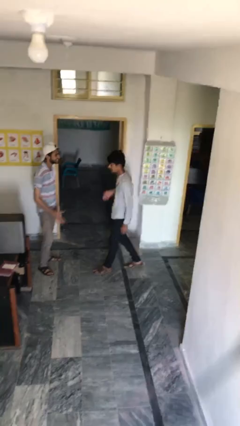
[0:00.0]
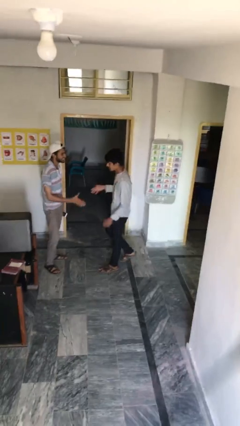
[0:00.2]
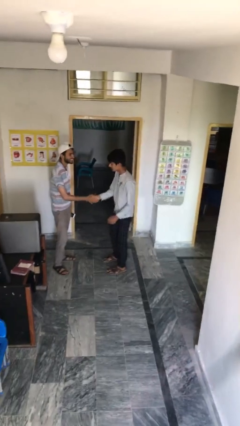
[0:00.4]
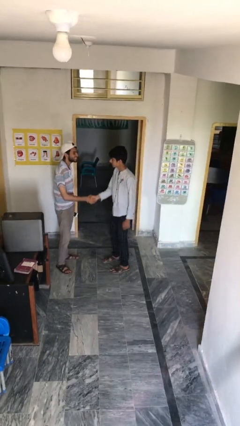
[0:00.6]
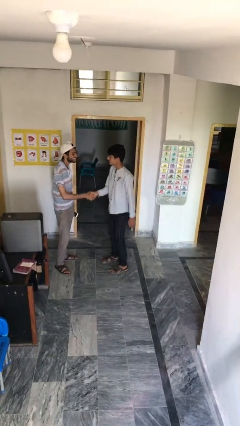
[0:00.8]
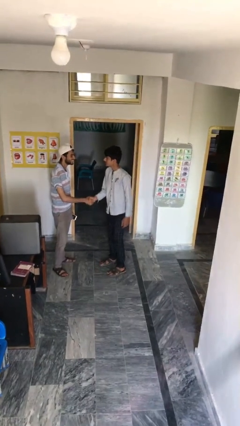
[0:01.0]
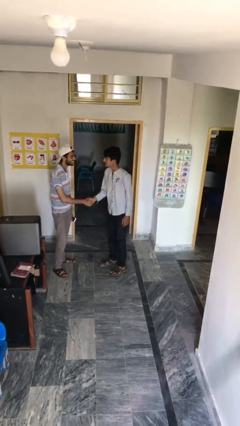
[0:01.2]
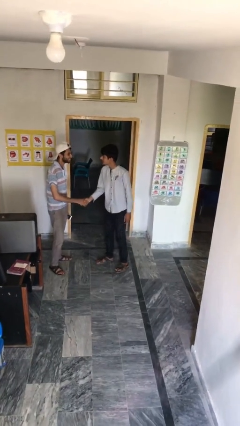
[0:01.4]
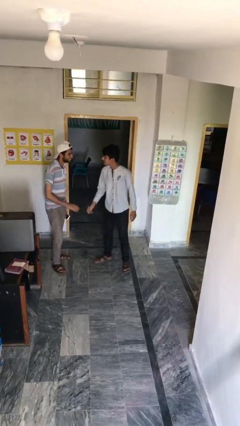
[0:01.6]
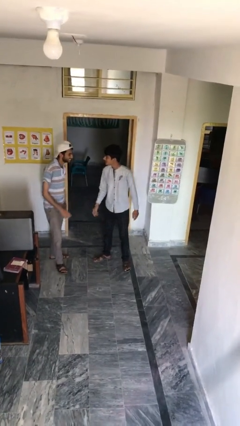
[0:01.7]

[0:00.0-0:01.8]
person shakes hand

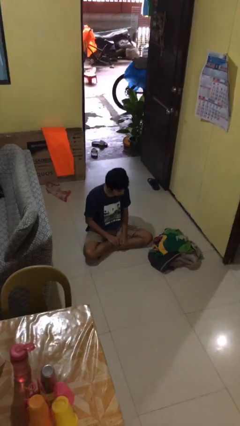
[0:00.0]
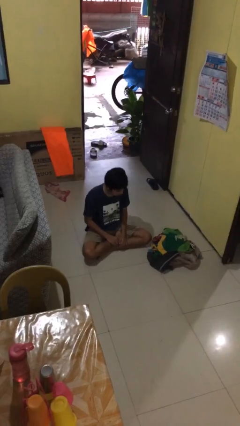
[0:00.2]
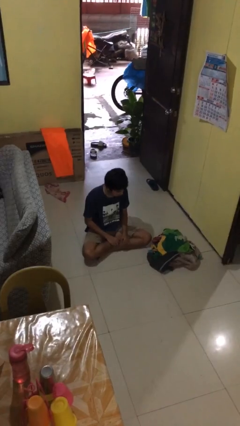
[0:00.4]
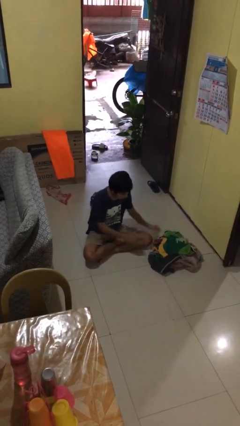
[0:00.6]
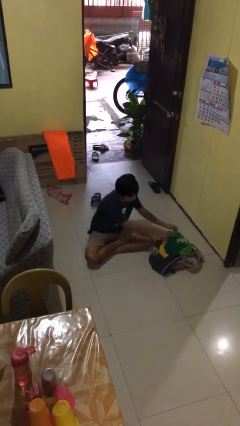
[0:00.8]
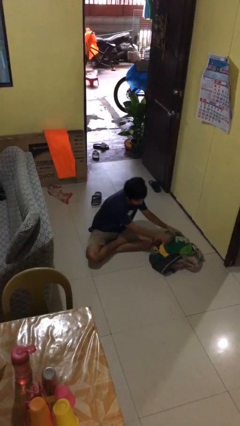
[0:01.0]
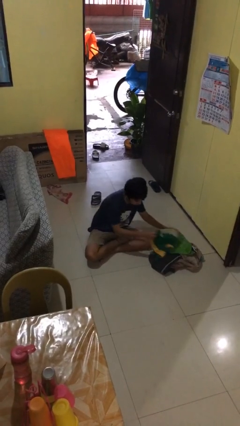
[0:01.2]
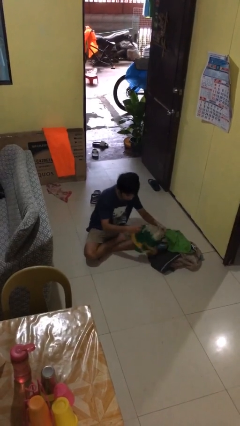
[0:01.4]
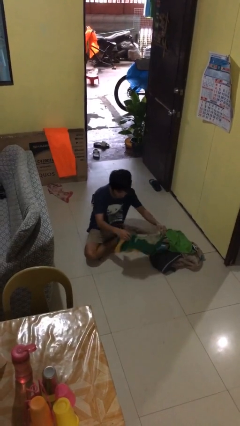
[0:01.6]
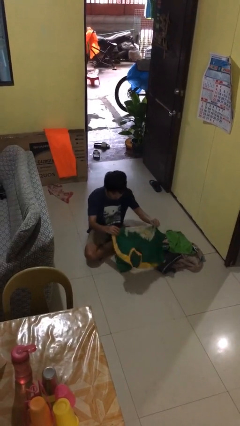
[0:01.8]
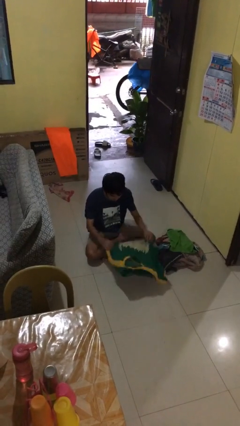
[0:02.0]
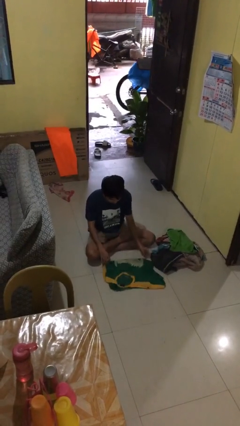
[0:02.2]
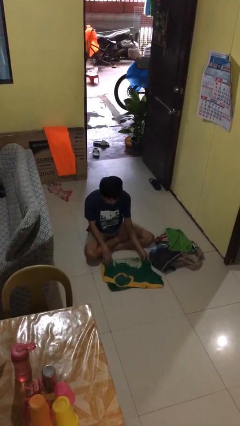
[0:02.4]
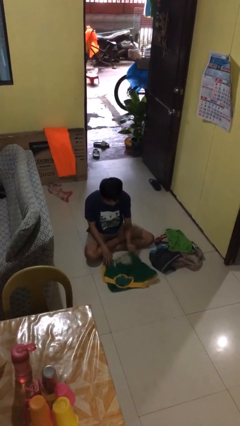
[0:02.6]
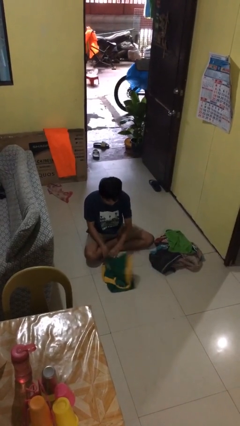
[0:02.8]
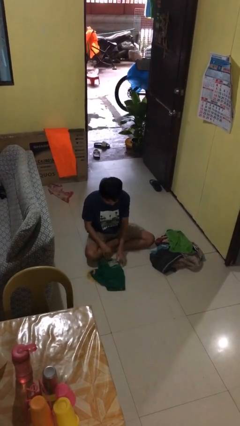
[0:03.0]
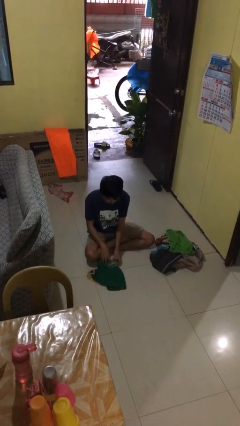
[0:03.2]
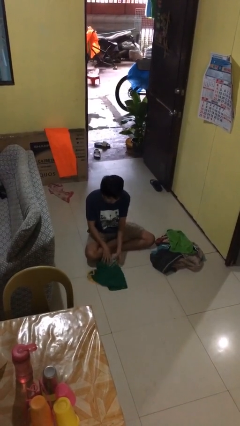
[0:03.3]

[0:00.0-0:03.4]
person folds shirt

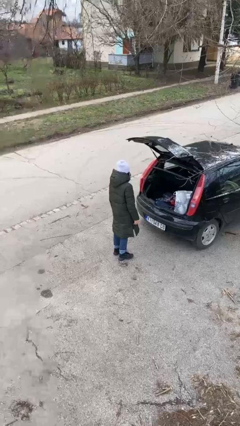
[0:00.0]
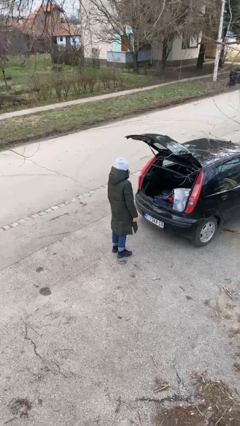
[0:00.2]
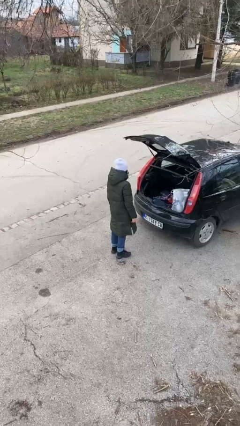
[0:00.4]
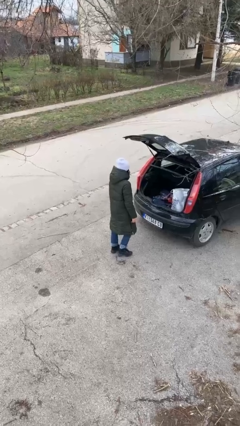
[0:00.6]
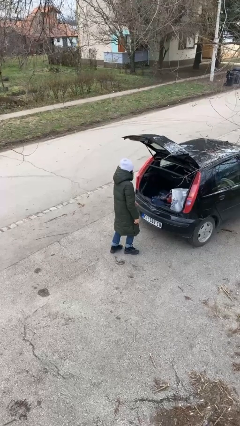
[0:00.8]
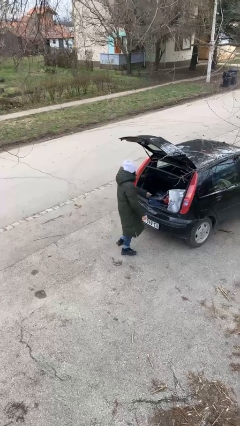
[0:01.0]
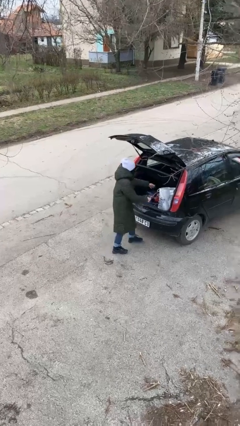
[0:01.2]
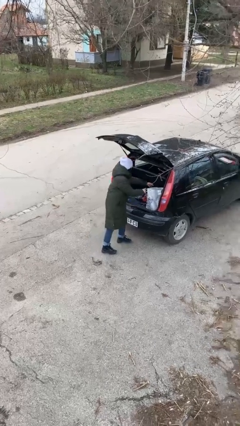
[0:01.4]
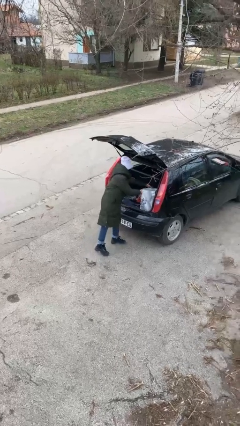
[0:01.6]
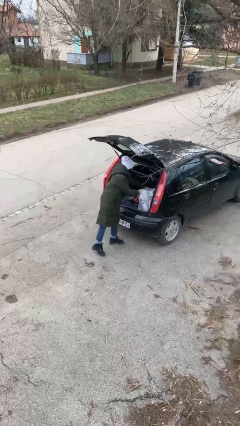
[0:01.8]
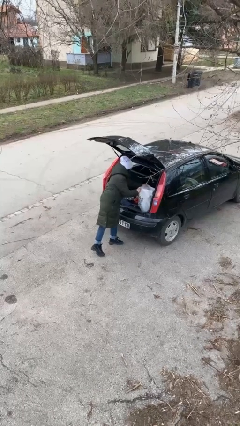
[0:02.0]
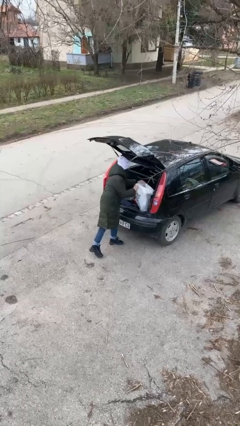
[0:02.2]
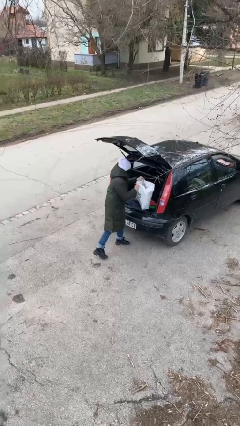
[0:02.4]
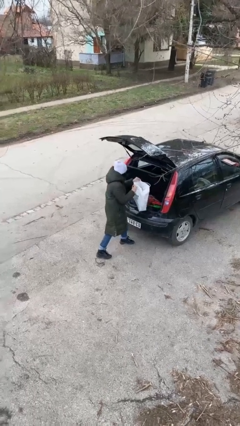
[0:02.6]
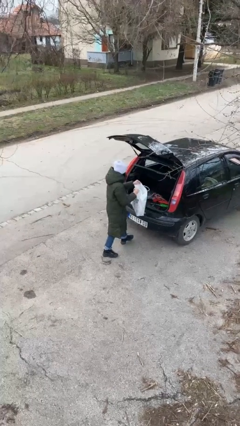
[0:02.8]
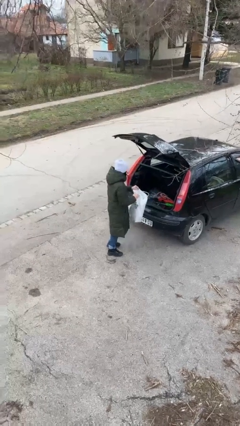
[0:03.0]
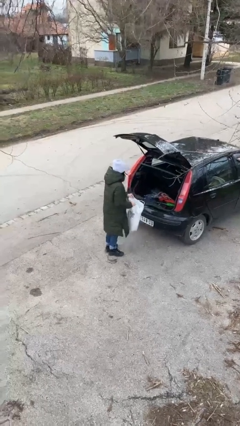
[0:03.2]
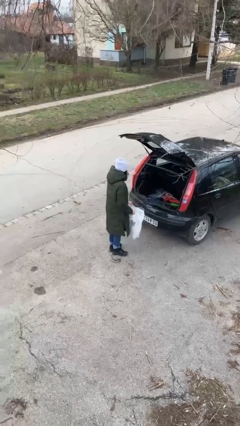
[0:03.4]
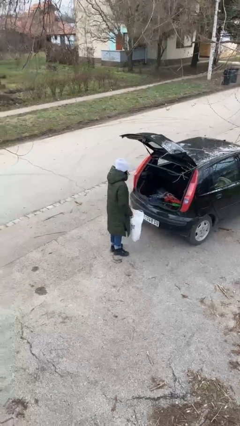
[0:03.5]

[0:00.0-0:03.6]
person unloads car

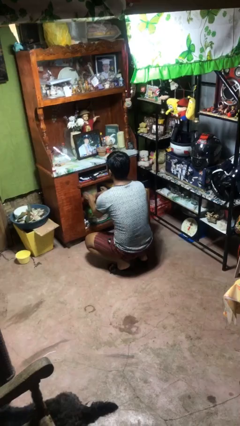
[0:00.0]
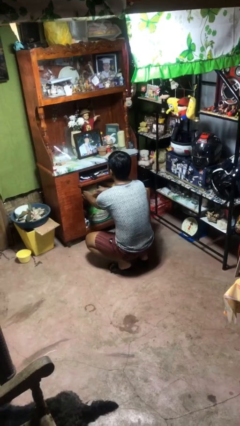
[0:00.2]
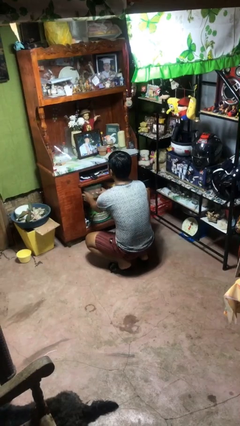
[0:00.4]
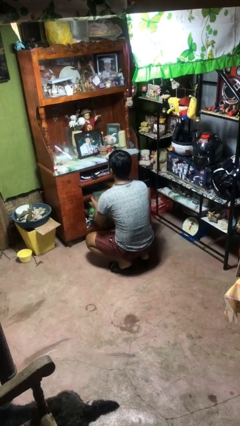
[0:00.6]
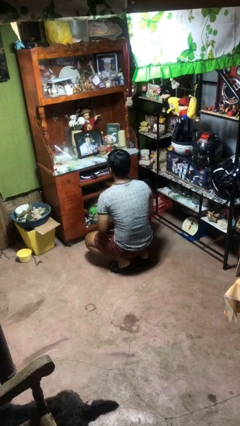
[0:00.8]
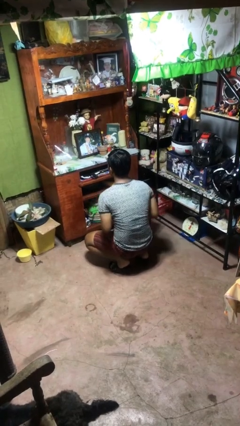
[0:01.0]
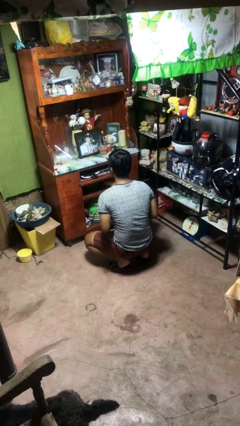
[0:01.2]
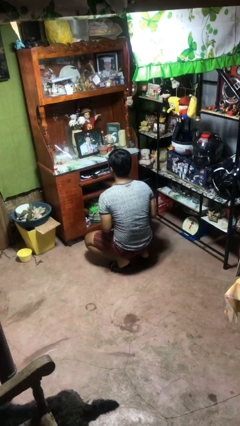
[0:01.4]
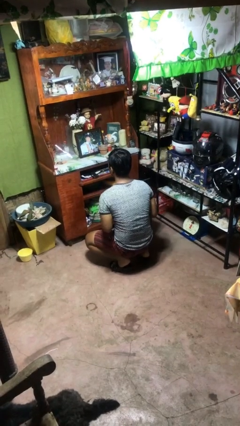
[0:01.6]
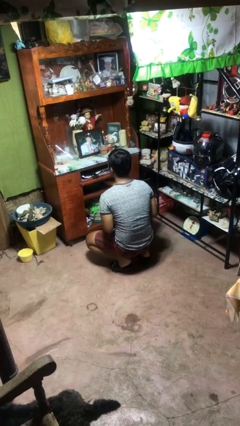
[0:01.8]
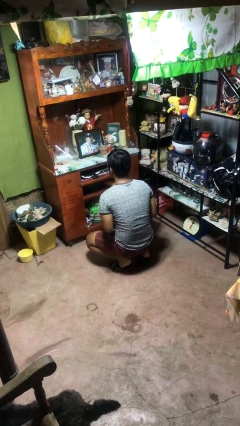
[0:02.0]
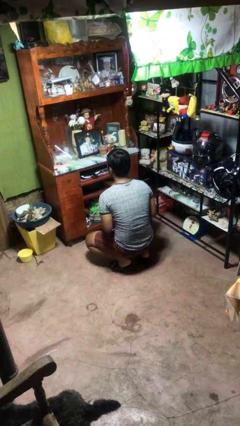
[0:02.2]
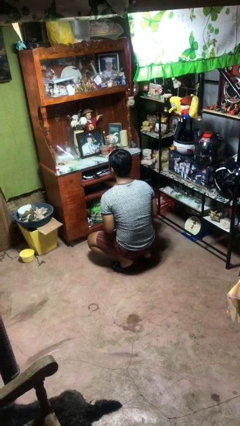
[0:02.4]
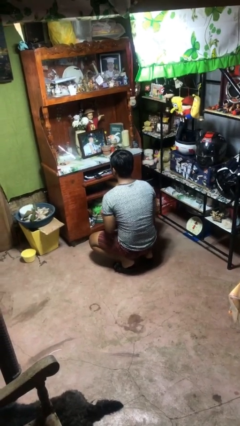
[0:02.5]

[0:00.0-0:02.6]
person picks up object from cabinet

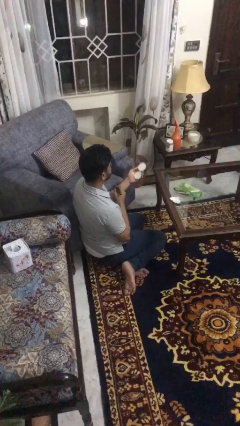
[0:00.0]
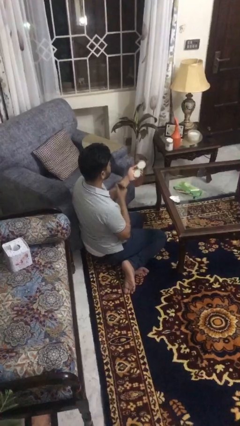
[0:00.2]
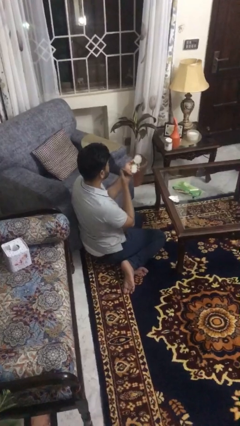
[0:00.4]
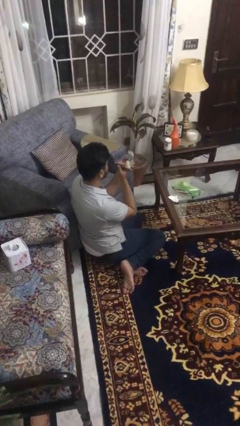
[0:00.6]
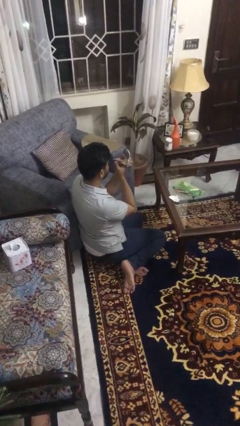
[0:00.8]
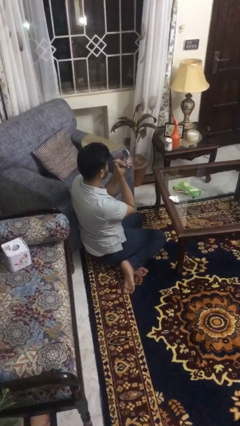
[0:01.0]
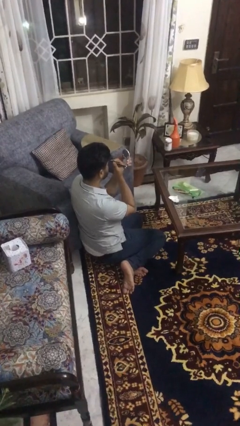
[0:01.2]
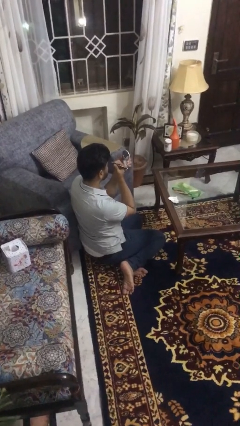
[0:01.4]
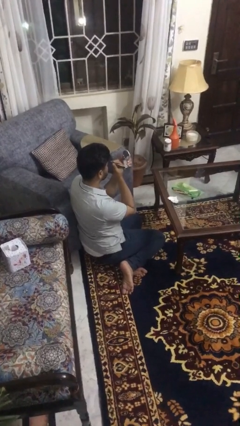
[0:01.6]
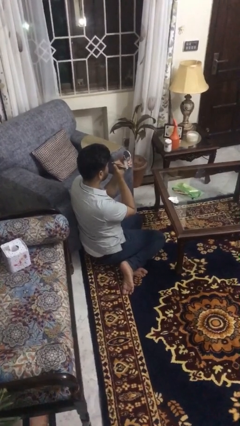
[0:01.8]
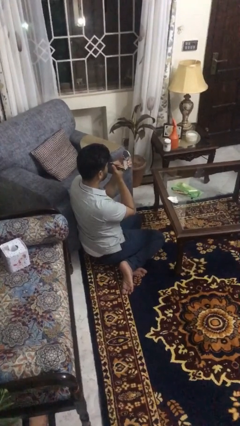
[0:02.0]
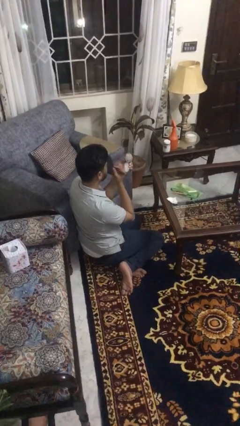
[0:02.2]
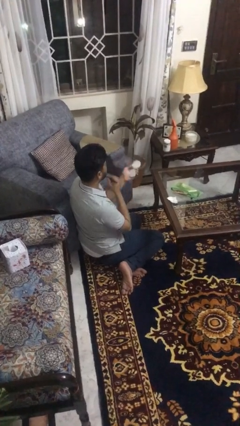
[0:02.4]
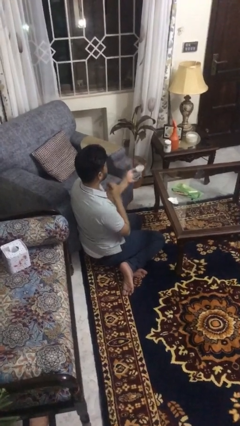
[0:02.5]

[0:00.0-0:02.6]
person applies eye makeup

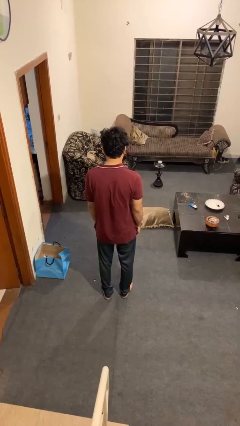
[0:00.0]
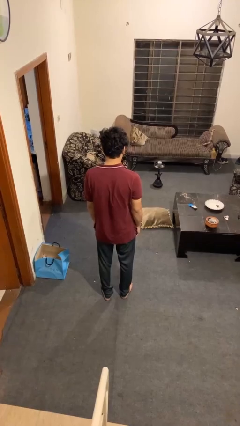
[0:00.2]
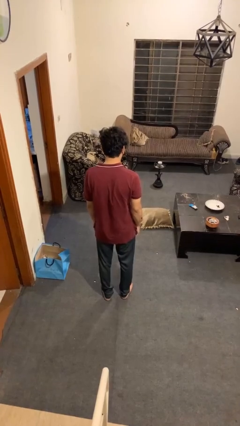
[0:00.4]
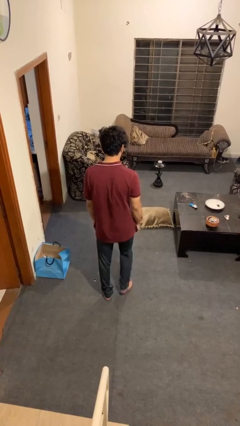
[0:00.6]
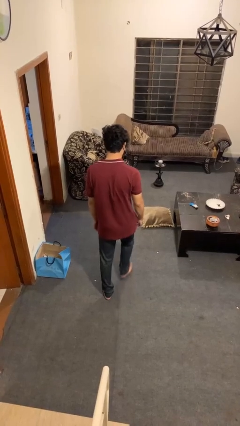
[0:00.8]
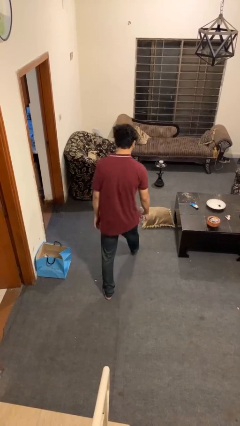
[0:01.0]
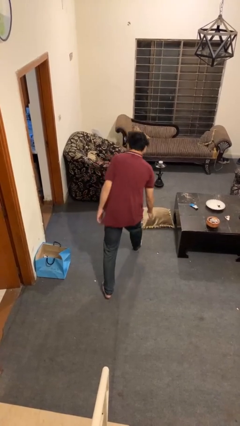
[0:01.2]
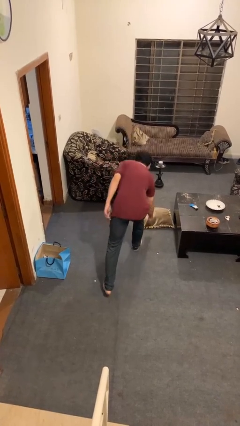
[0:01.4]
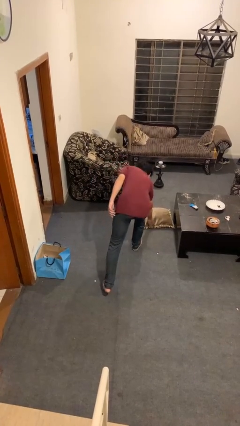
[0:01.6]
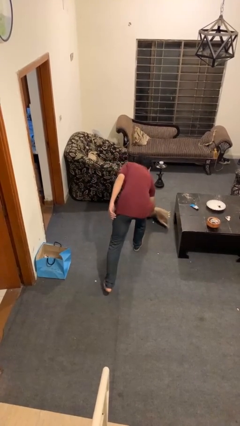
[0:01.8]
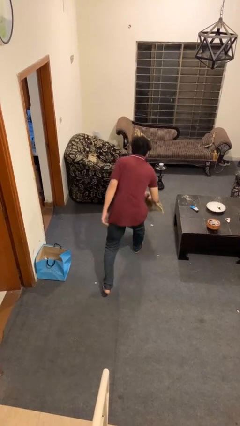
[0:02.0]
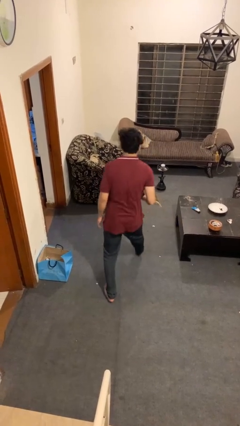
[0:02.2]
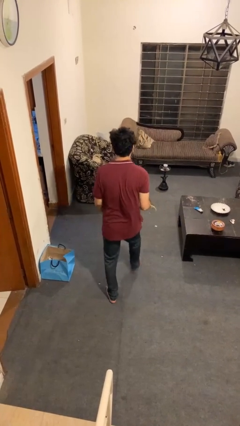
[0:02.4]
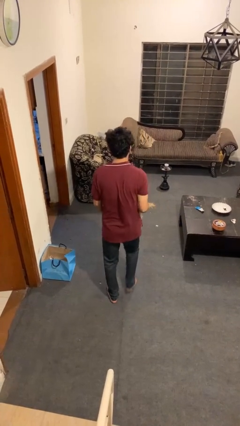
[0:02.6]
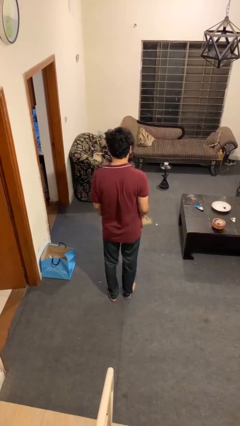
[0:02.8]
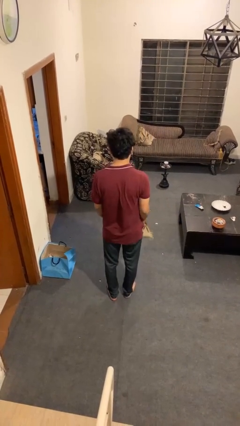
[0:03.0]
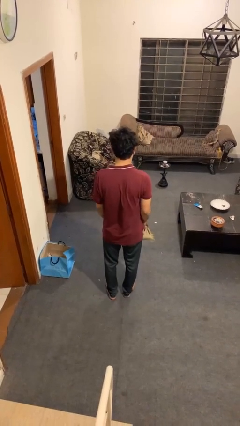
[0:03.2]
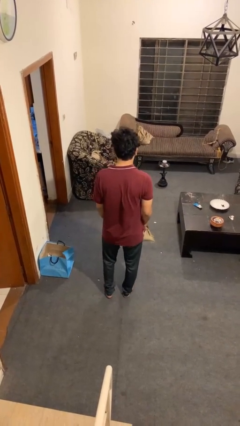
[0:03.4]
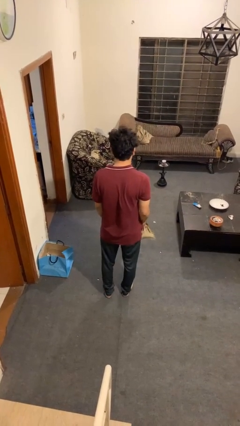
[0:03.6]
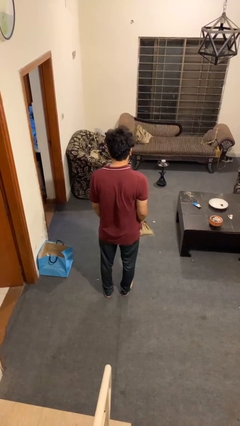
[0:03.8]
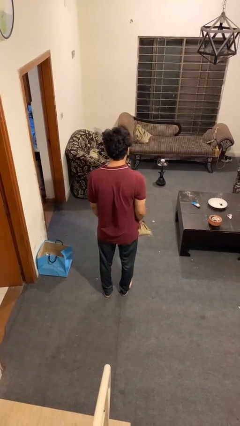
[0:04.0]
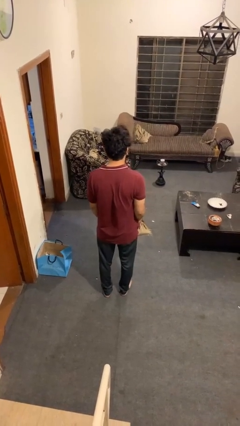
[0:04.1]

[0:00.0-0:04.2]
person picks up object from floor
